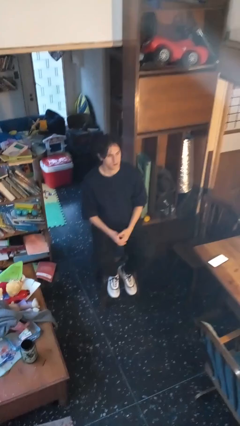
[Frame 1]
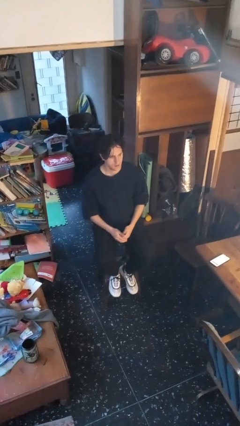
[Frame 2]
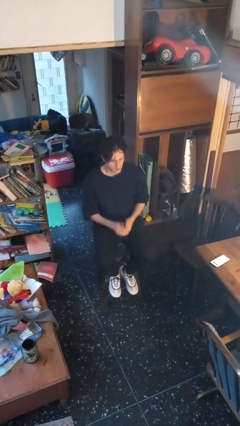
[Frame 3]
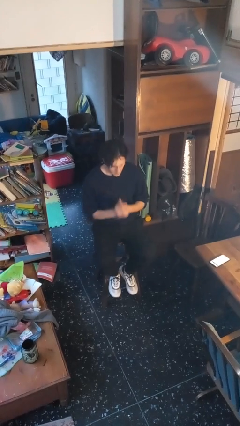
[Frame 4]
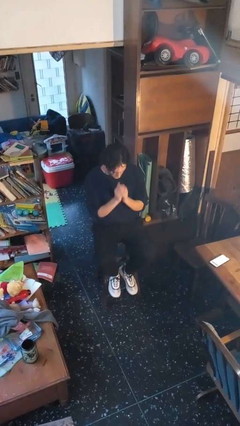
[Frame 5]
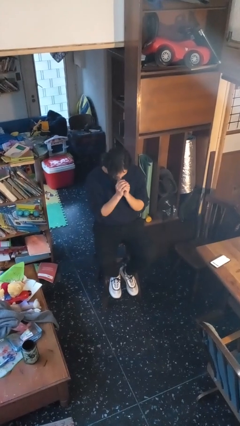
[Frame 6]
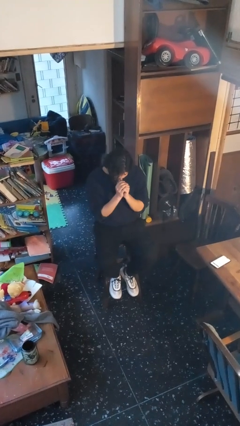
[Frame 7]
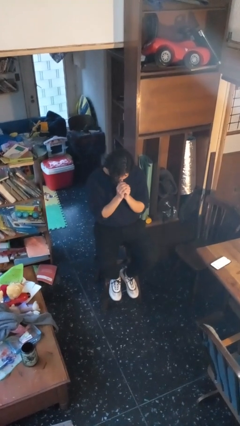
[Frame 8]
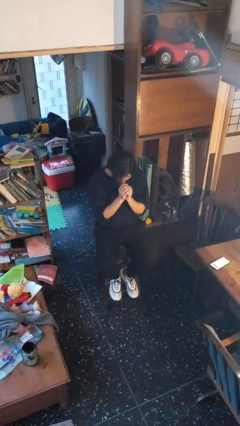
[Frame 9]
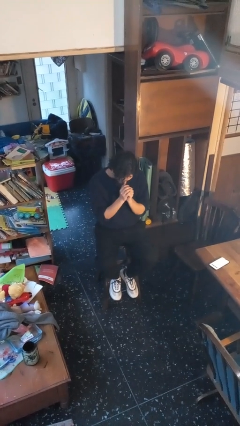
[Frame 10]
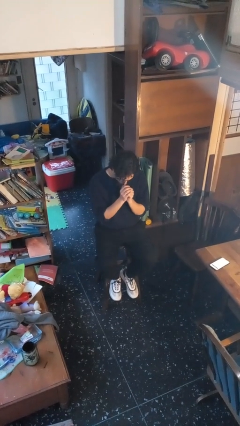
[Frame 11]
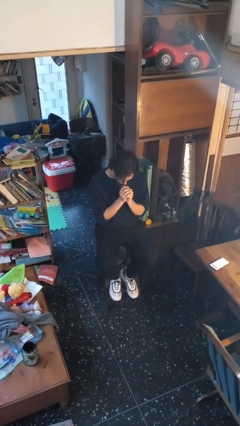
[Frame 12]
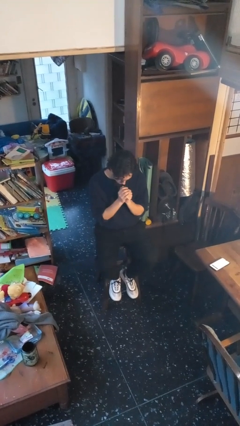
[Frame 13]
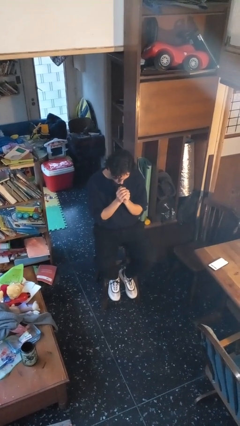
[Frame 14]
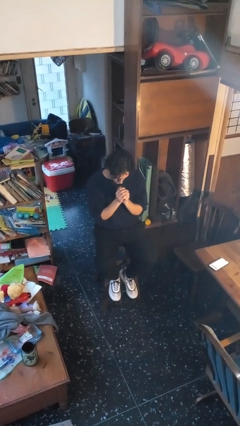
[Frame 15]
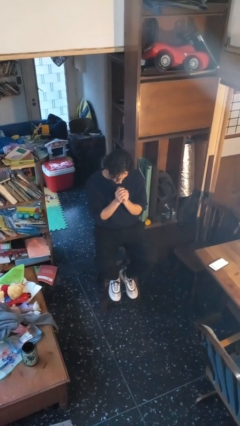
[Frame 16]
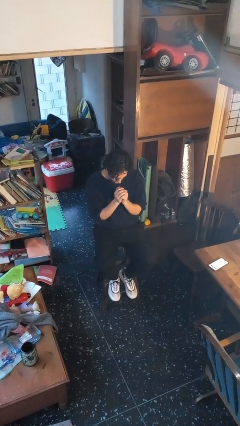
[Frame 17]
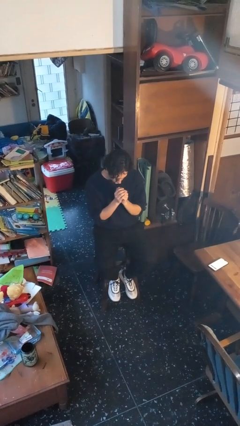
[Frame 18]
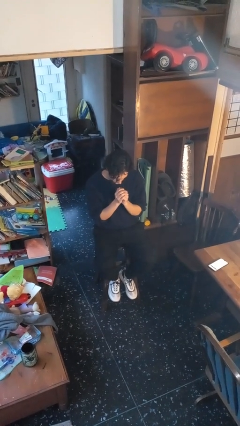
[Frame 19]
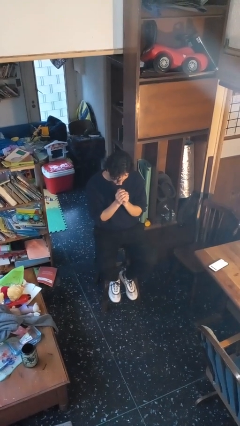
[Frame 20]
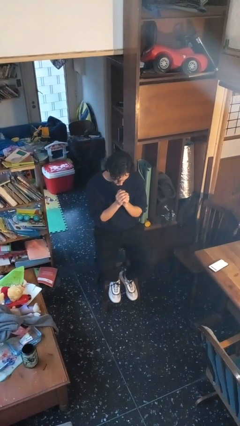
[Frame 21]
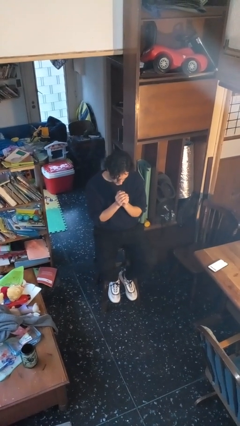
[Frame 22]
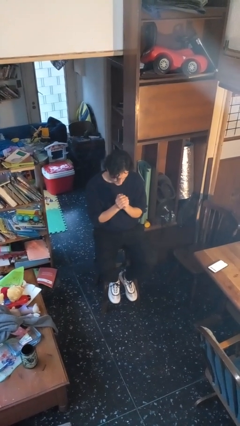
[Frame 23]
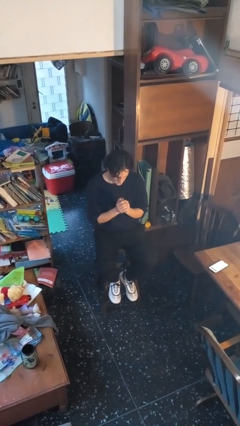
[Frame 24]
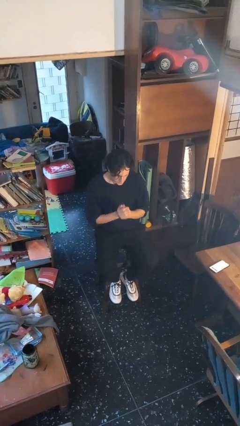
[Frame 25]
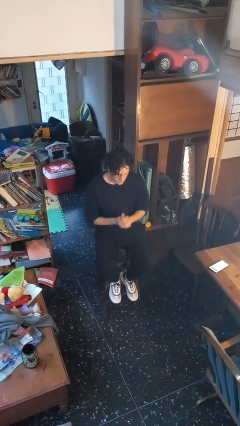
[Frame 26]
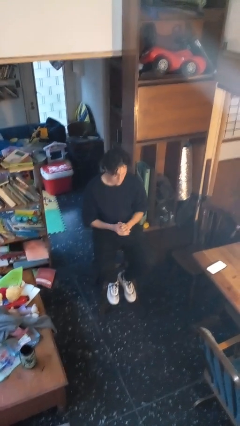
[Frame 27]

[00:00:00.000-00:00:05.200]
person prays

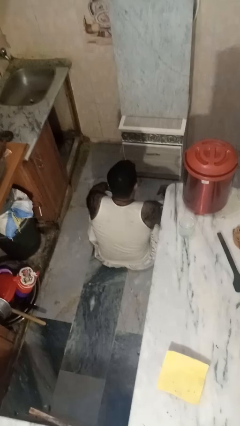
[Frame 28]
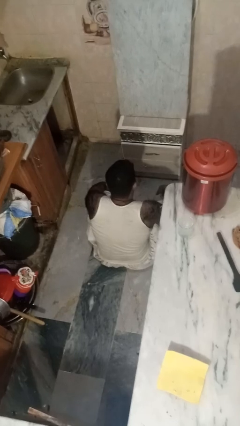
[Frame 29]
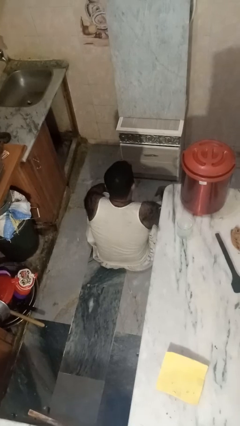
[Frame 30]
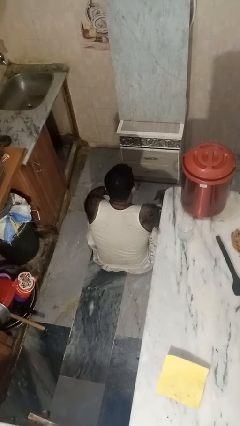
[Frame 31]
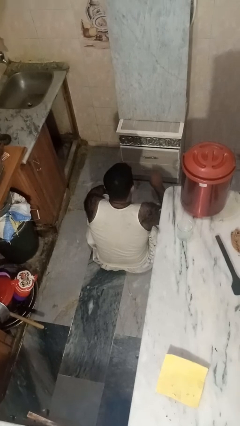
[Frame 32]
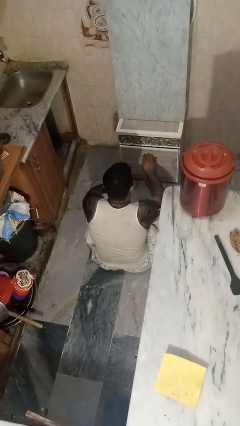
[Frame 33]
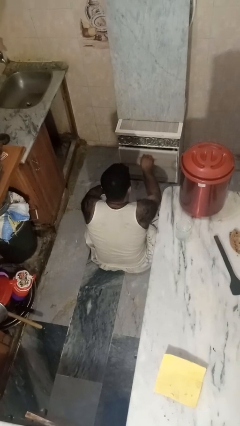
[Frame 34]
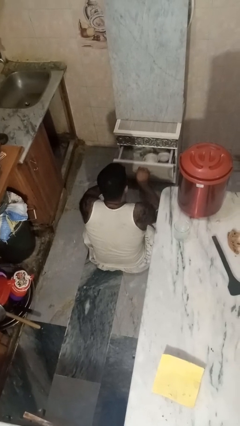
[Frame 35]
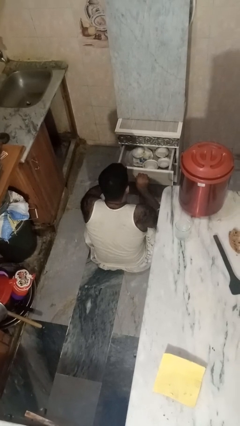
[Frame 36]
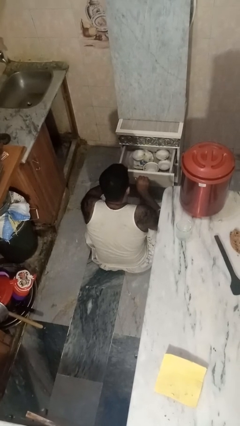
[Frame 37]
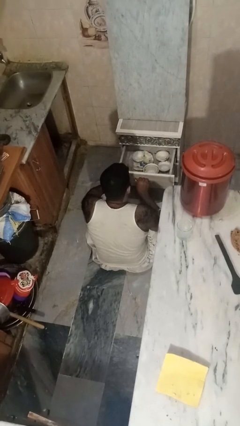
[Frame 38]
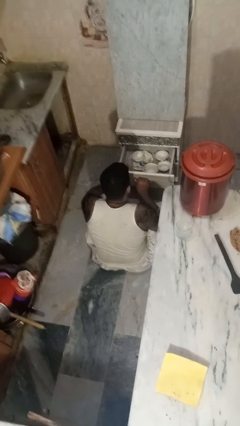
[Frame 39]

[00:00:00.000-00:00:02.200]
person opens kitchen drawer

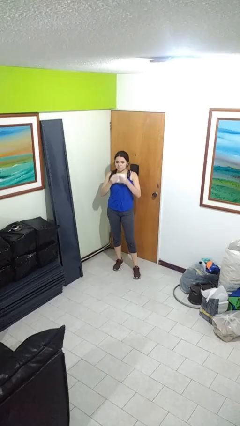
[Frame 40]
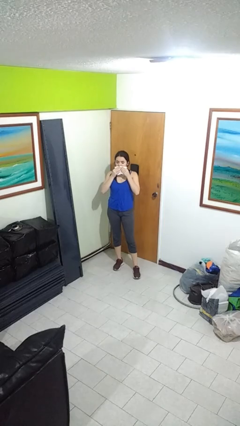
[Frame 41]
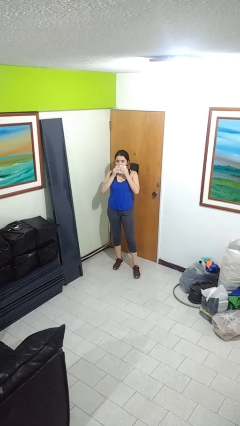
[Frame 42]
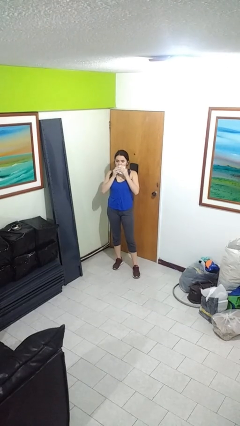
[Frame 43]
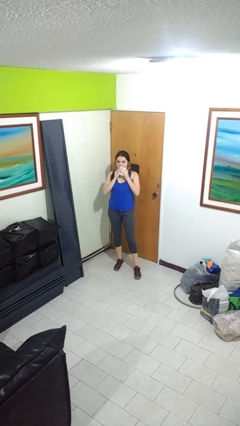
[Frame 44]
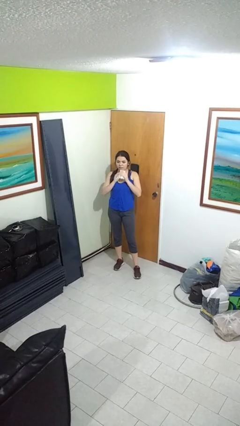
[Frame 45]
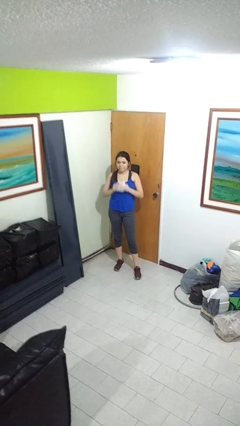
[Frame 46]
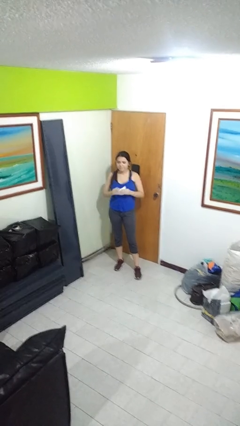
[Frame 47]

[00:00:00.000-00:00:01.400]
person wipes mouth with napkin

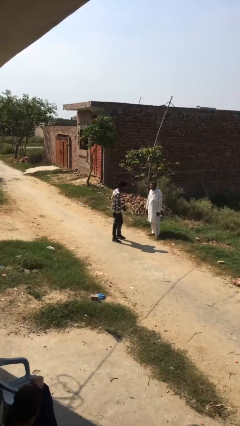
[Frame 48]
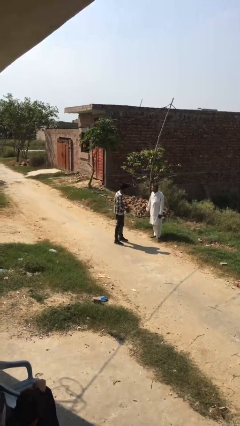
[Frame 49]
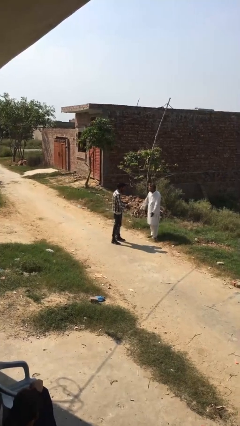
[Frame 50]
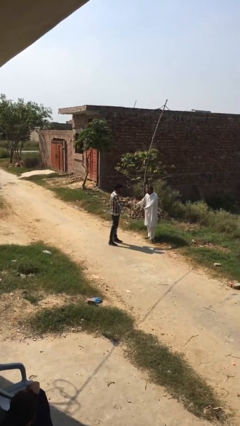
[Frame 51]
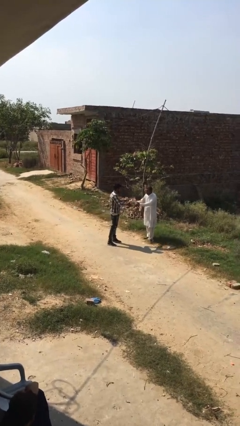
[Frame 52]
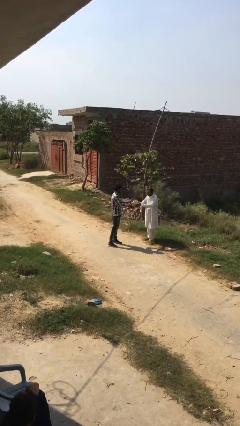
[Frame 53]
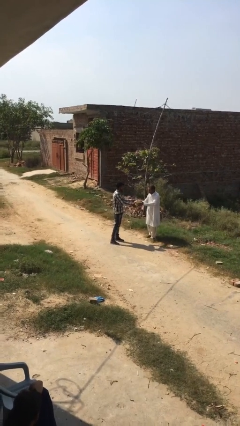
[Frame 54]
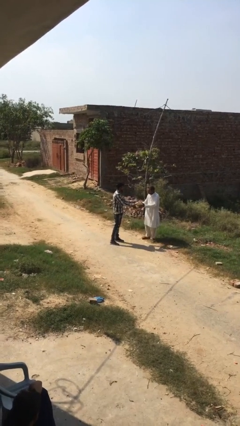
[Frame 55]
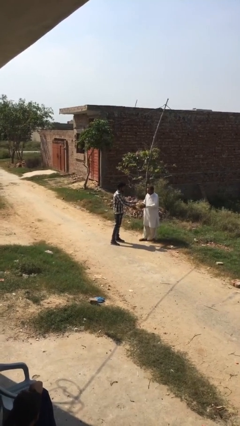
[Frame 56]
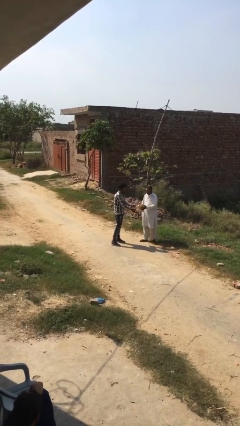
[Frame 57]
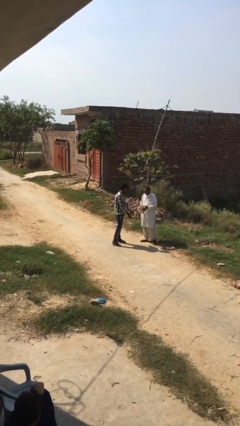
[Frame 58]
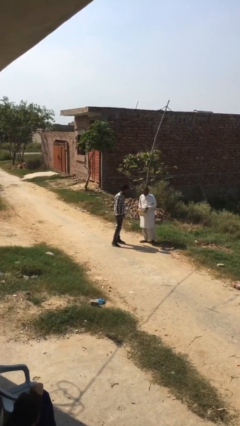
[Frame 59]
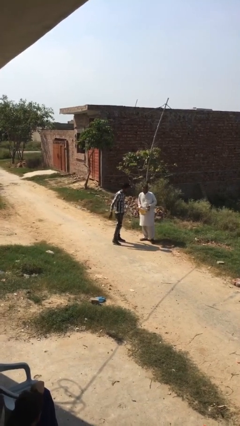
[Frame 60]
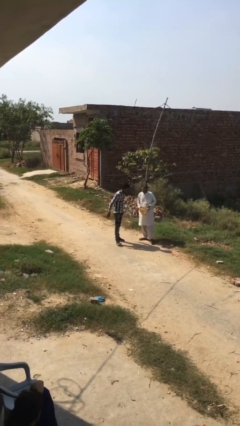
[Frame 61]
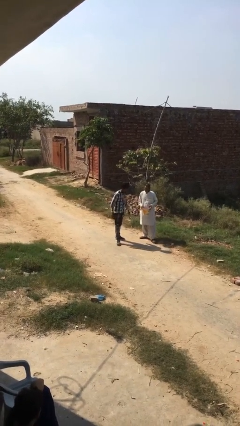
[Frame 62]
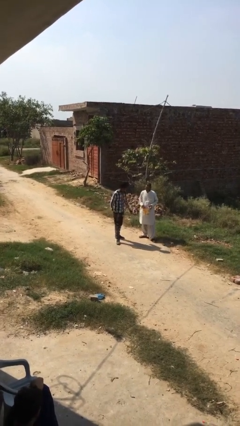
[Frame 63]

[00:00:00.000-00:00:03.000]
person transfers object to person

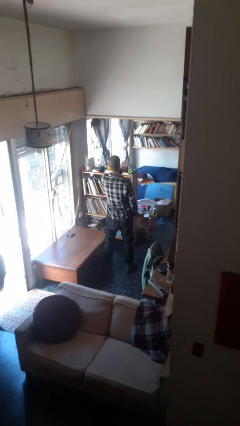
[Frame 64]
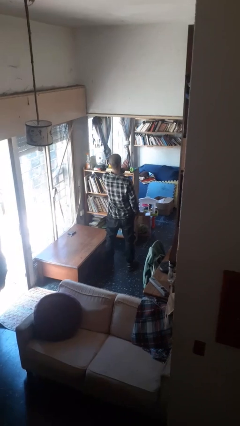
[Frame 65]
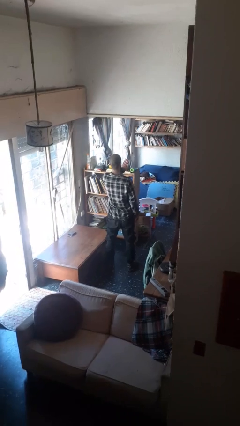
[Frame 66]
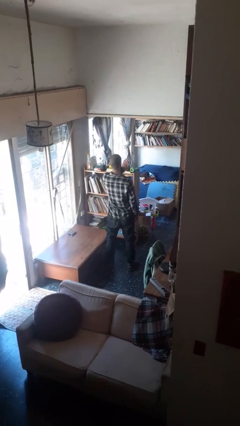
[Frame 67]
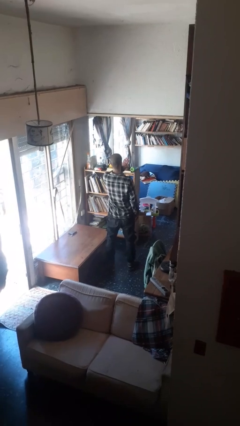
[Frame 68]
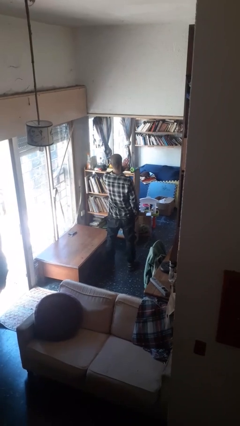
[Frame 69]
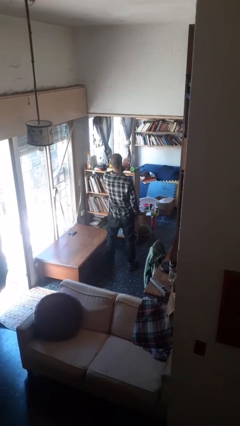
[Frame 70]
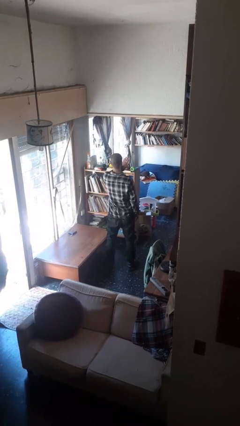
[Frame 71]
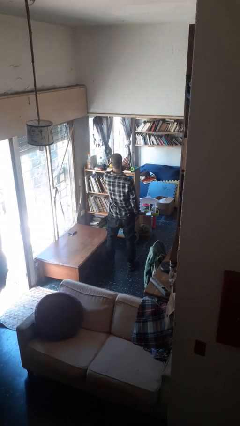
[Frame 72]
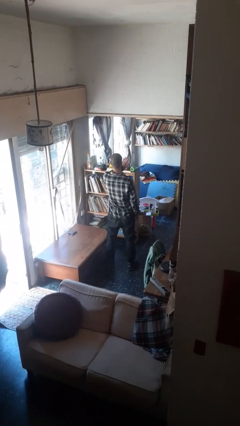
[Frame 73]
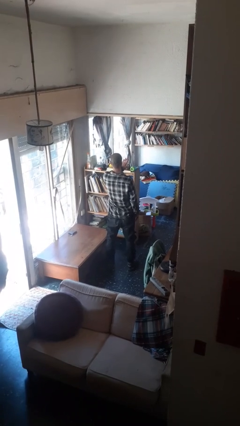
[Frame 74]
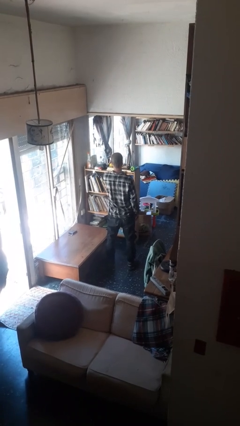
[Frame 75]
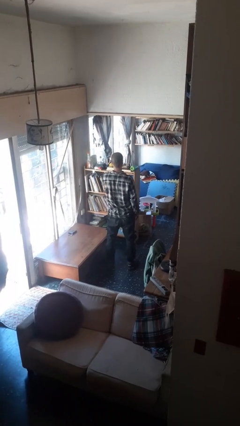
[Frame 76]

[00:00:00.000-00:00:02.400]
person gestures stop

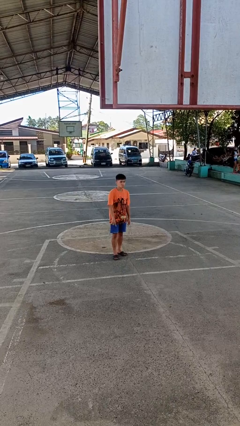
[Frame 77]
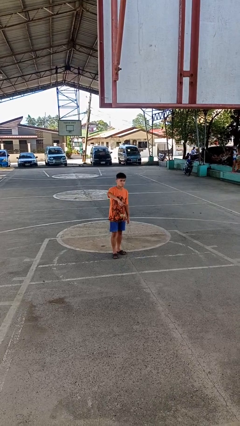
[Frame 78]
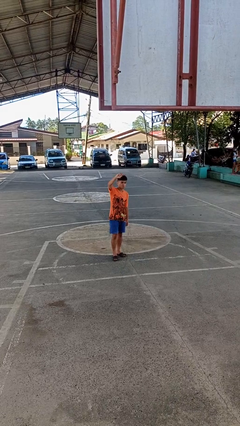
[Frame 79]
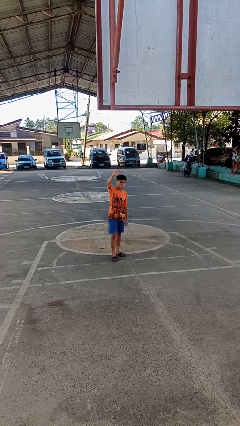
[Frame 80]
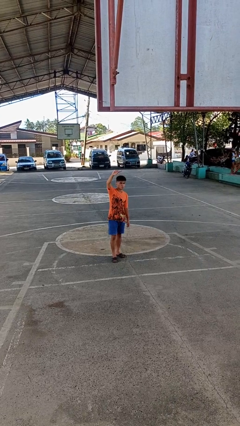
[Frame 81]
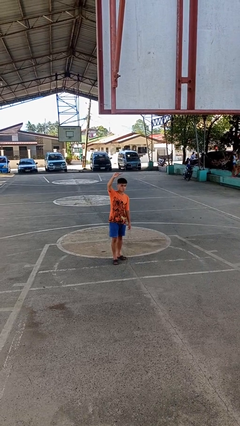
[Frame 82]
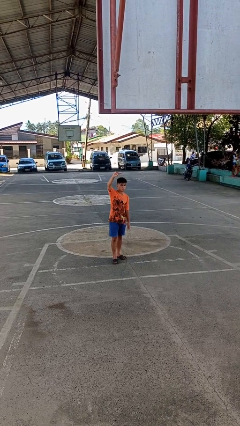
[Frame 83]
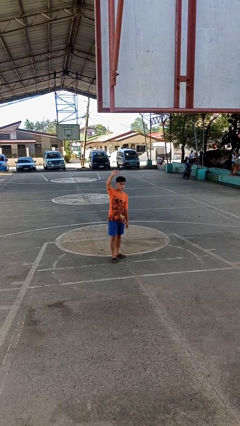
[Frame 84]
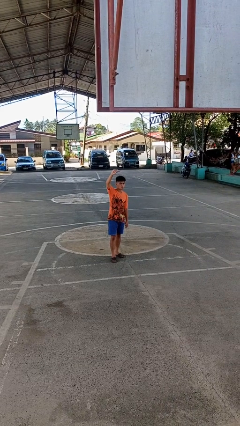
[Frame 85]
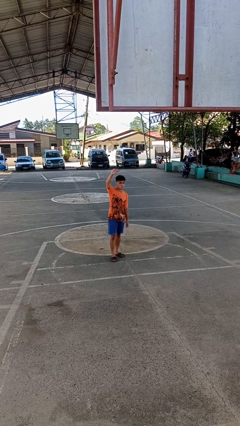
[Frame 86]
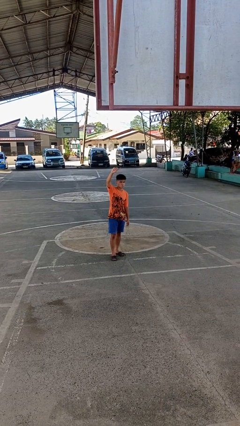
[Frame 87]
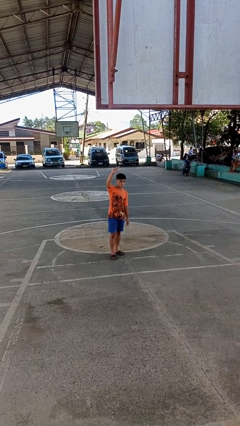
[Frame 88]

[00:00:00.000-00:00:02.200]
person gestures swipe up

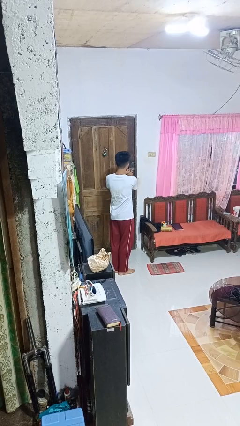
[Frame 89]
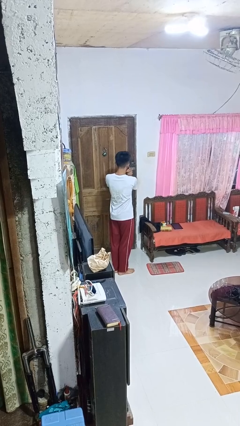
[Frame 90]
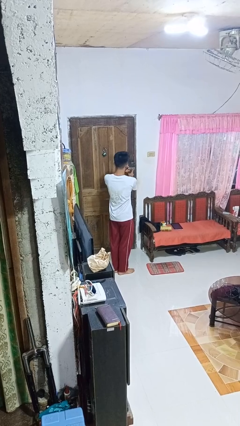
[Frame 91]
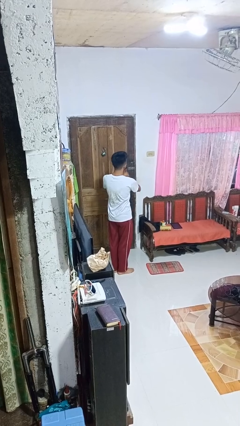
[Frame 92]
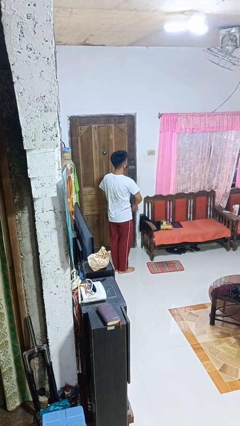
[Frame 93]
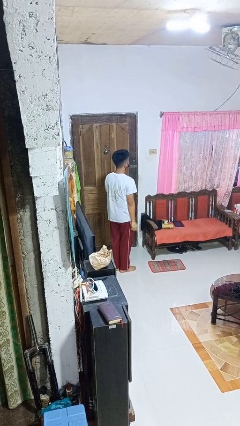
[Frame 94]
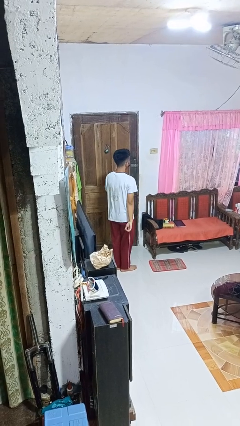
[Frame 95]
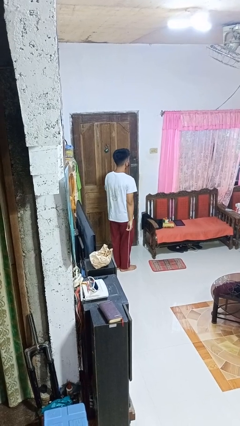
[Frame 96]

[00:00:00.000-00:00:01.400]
person locks door with keys
